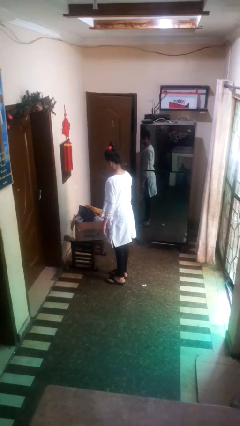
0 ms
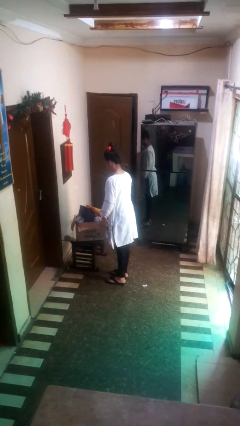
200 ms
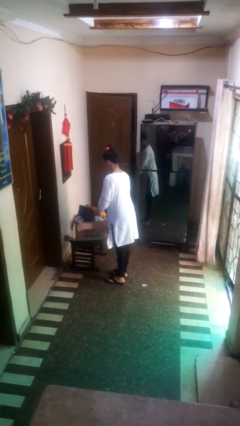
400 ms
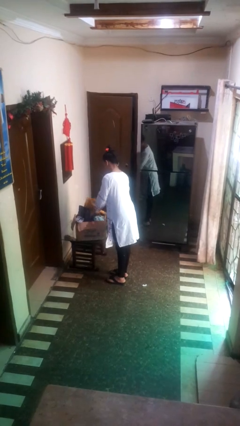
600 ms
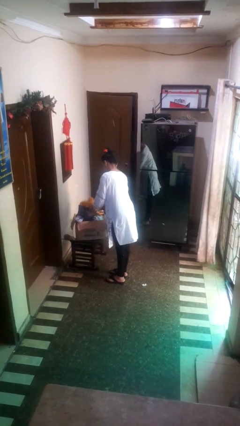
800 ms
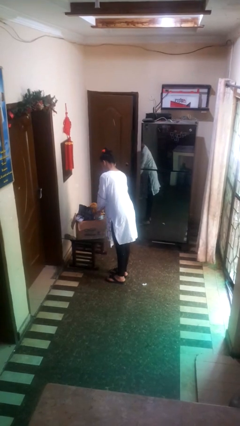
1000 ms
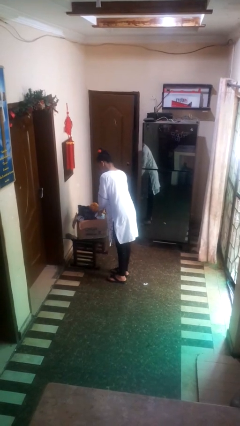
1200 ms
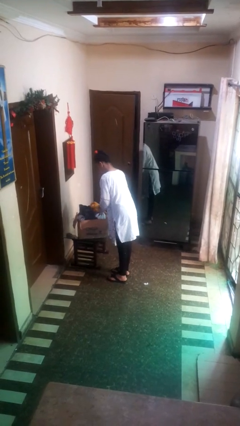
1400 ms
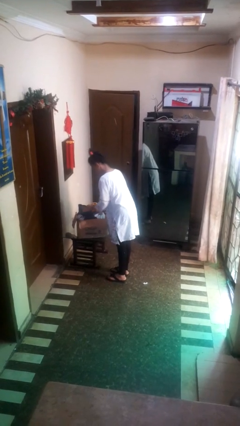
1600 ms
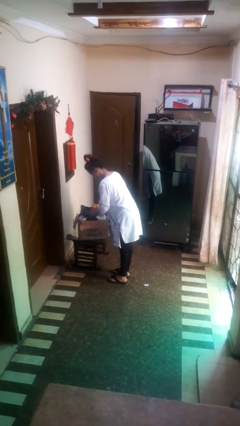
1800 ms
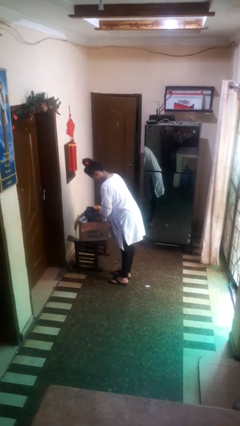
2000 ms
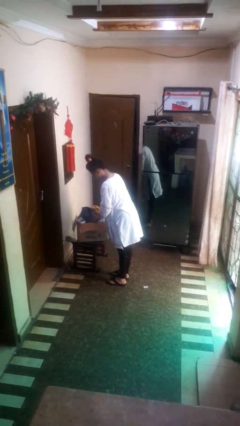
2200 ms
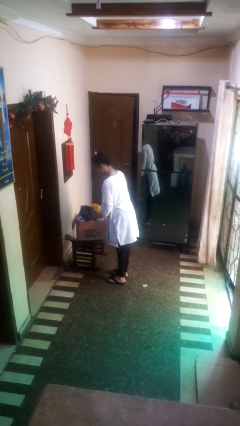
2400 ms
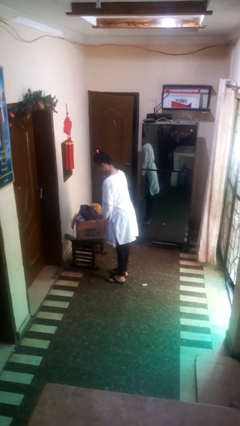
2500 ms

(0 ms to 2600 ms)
person searches in box

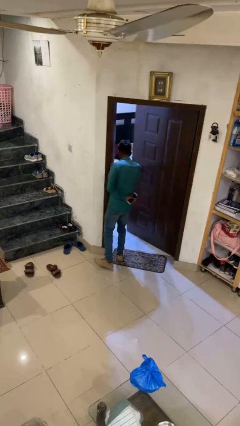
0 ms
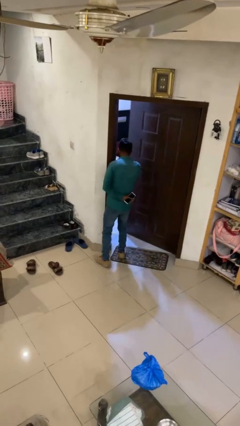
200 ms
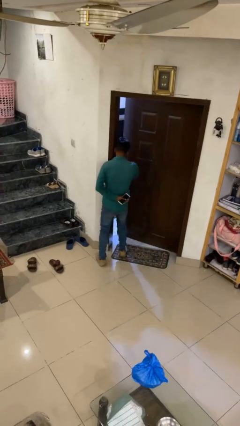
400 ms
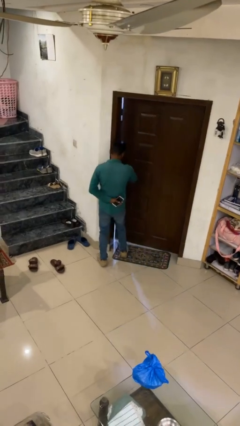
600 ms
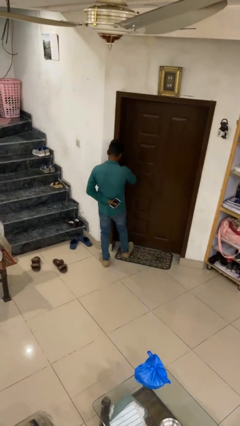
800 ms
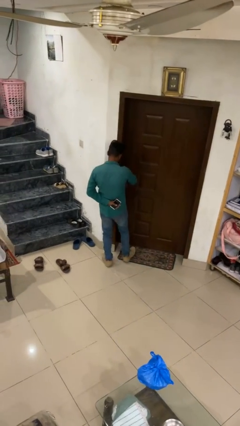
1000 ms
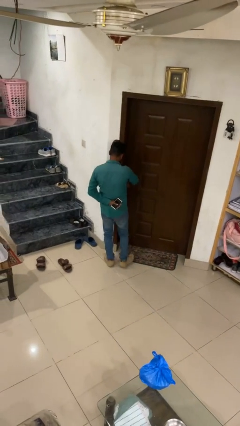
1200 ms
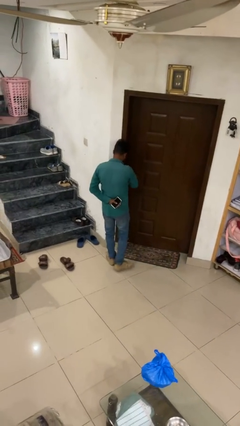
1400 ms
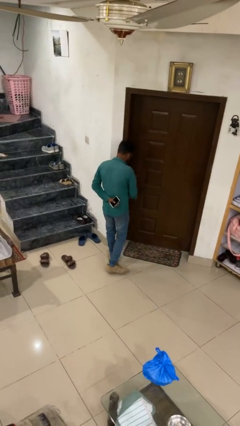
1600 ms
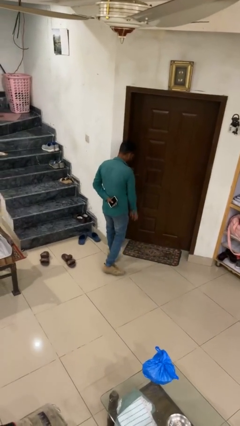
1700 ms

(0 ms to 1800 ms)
person closes facility door

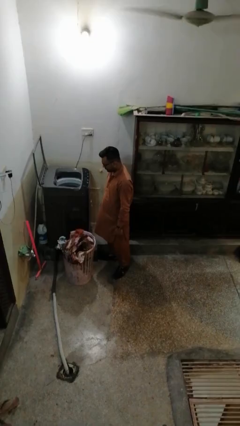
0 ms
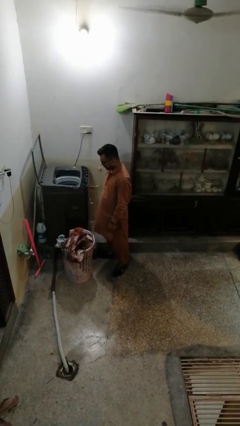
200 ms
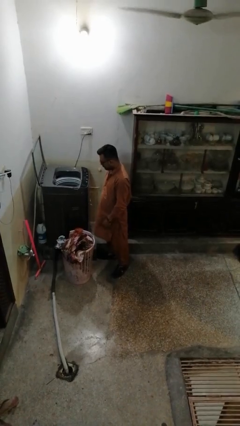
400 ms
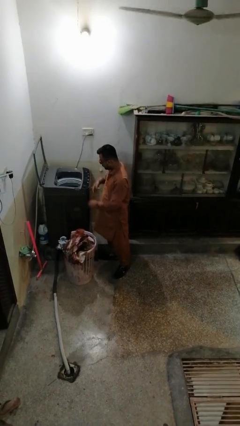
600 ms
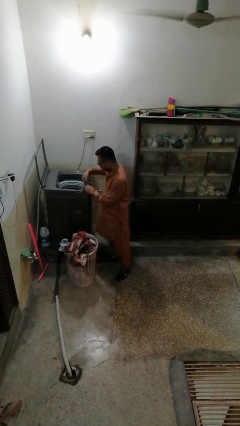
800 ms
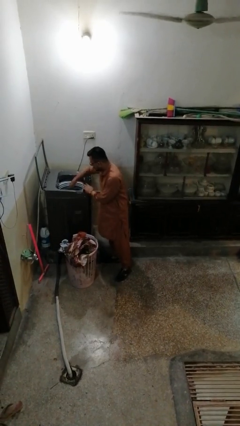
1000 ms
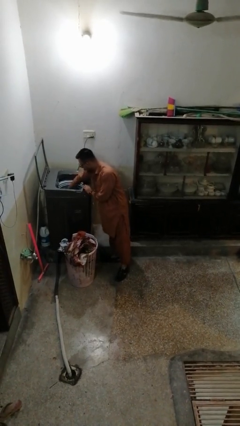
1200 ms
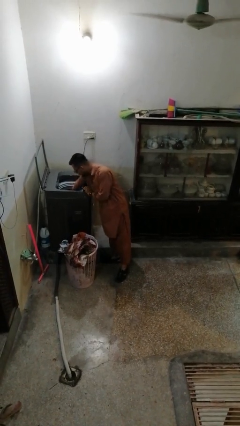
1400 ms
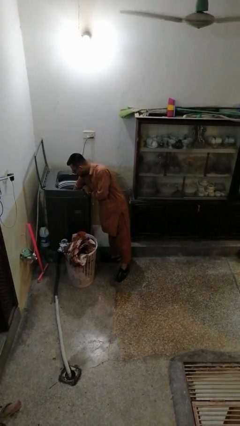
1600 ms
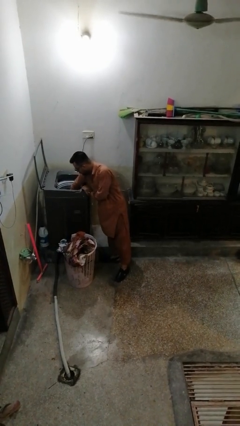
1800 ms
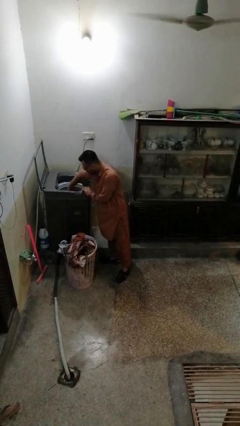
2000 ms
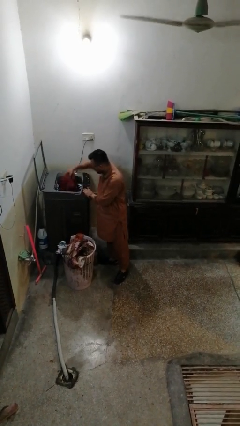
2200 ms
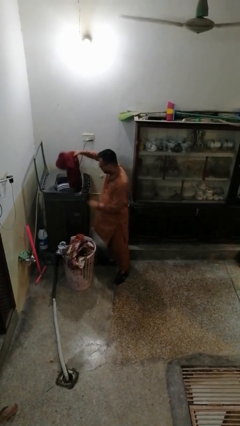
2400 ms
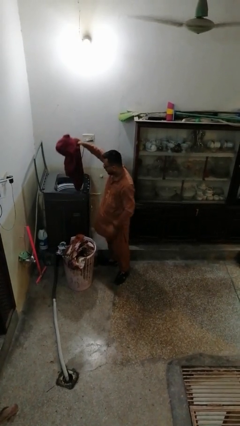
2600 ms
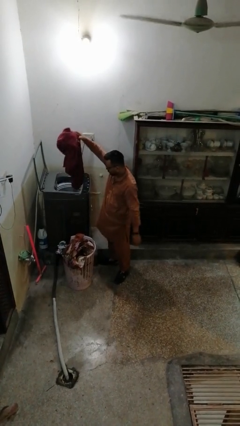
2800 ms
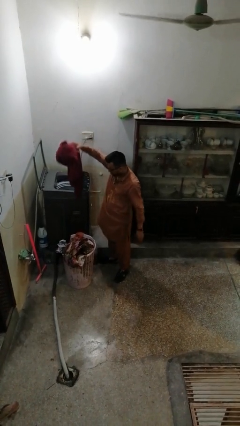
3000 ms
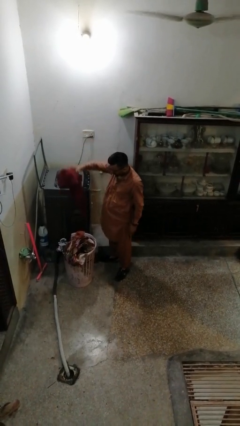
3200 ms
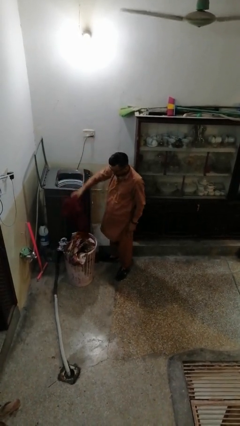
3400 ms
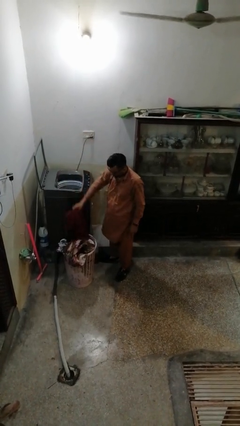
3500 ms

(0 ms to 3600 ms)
person unloads dryer

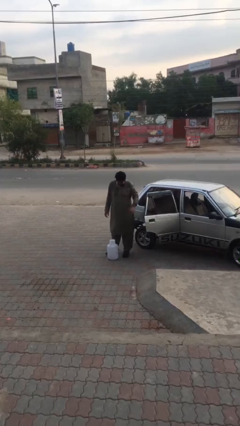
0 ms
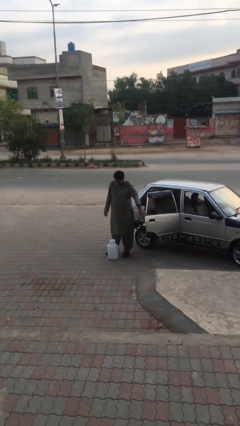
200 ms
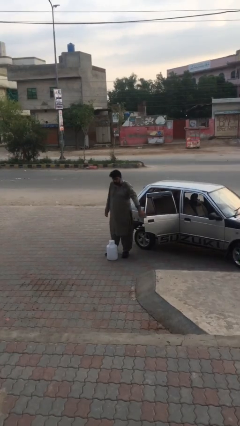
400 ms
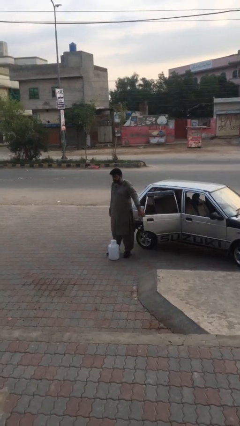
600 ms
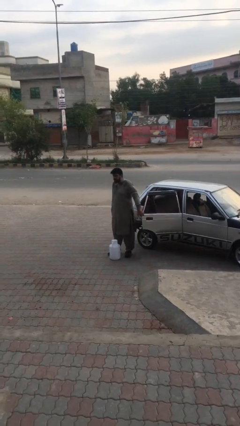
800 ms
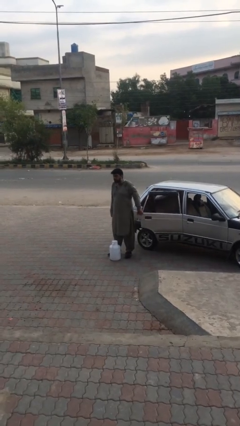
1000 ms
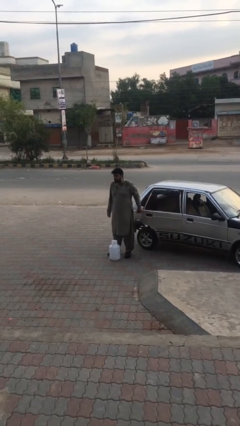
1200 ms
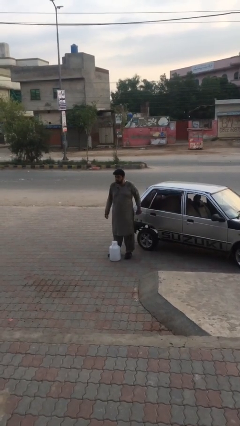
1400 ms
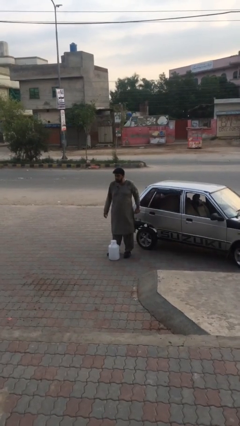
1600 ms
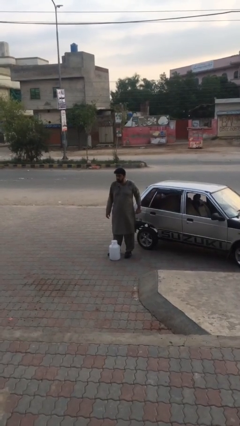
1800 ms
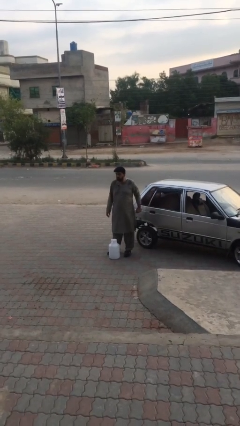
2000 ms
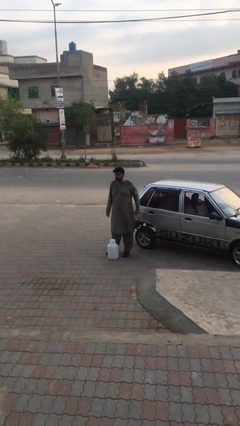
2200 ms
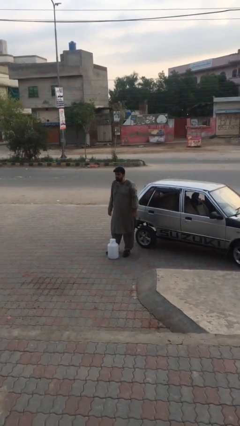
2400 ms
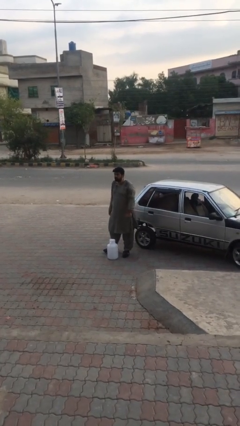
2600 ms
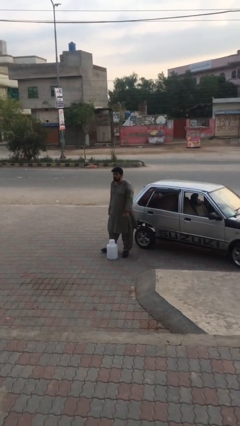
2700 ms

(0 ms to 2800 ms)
person closes car door

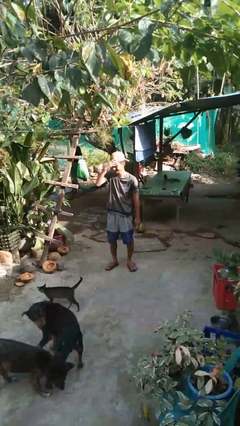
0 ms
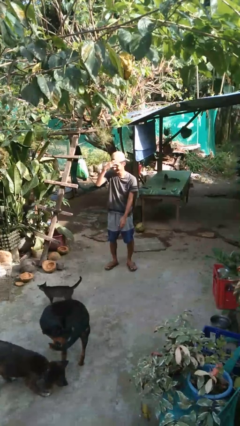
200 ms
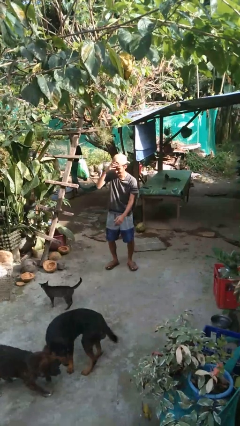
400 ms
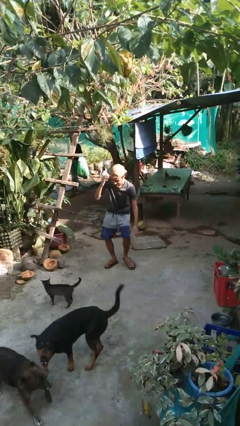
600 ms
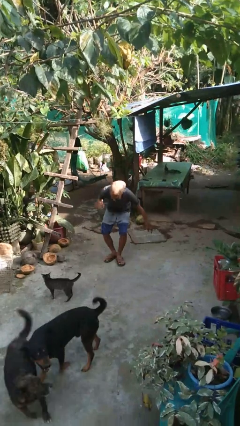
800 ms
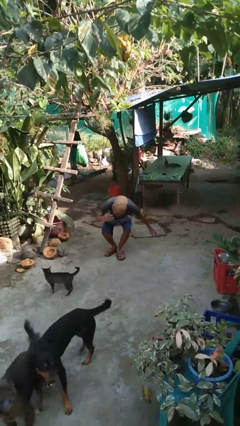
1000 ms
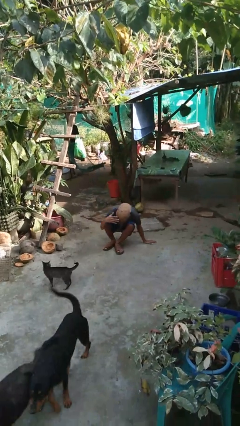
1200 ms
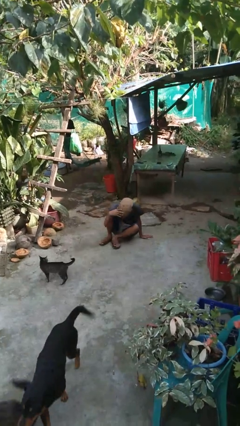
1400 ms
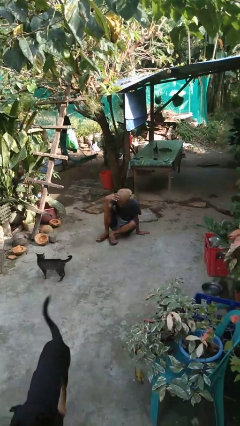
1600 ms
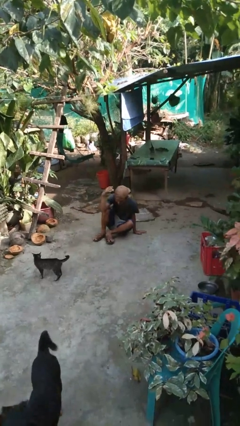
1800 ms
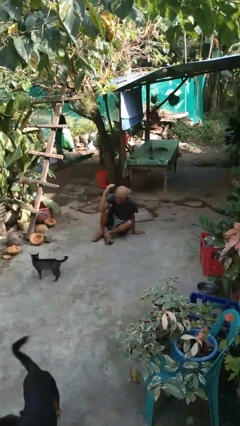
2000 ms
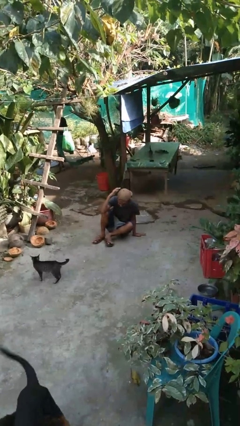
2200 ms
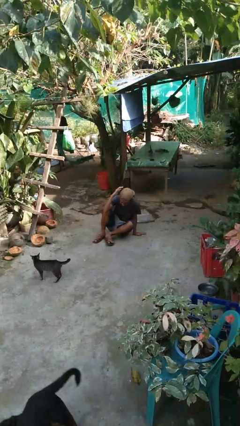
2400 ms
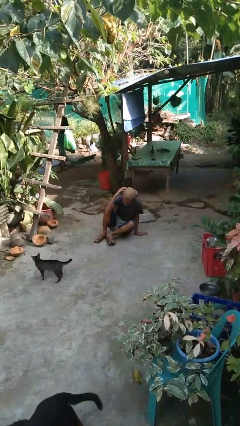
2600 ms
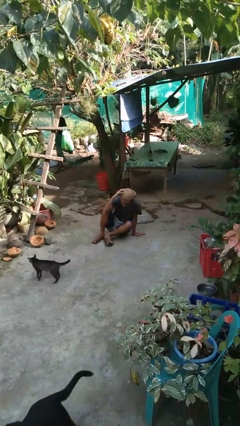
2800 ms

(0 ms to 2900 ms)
person falls while standing

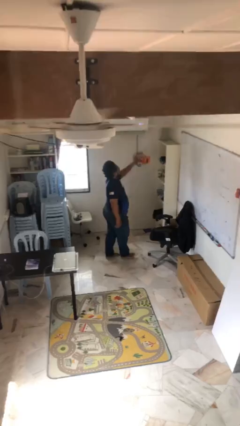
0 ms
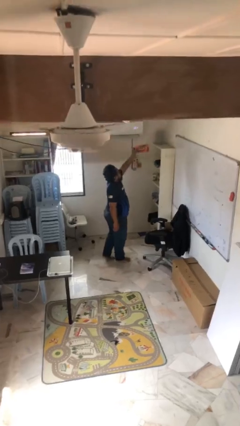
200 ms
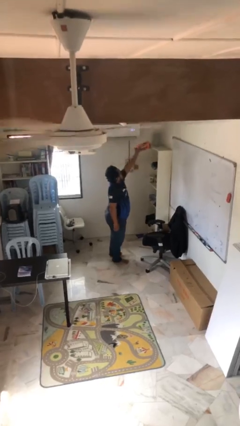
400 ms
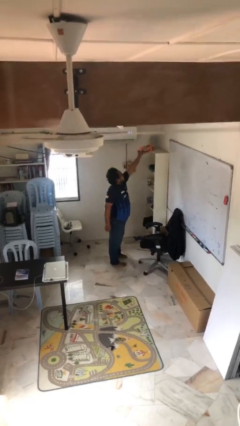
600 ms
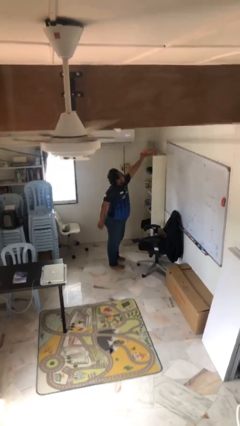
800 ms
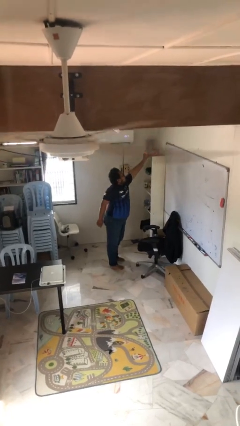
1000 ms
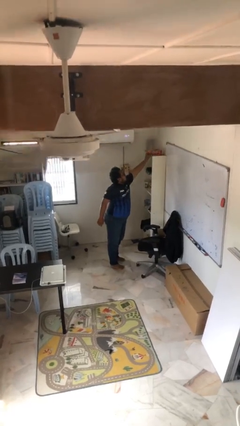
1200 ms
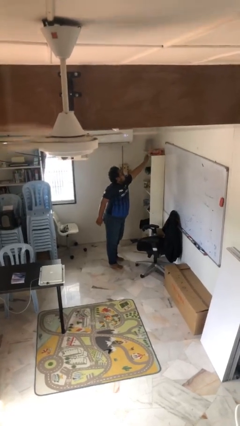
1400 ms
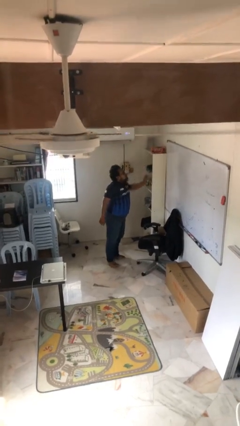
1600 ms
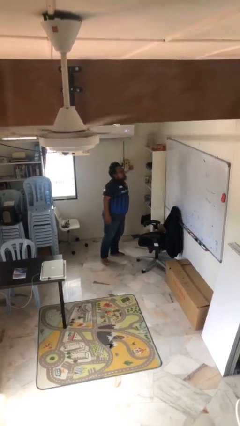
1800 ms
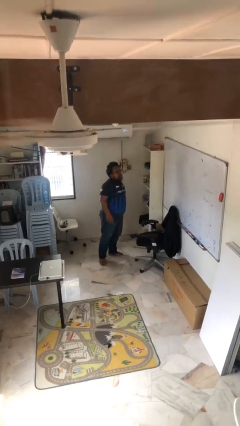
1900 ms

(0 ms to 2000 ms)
person puts down object on shelf

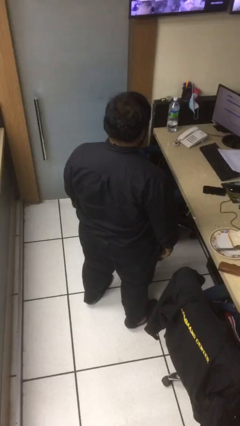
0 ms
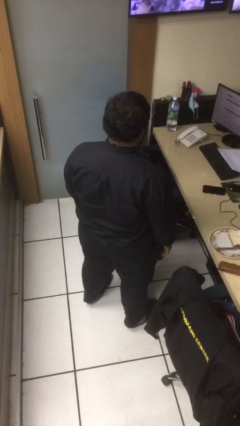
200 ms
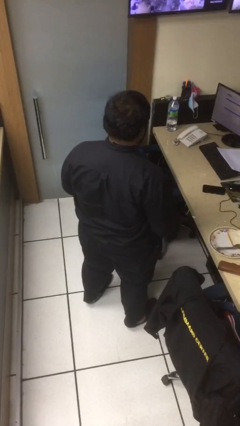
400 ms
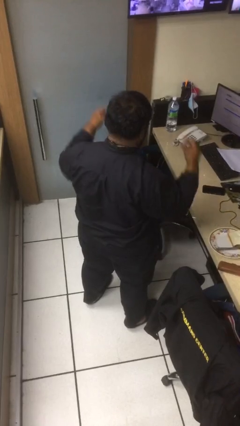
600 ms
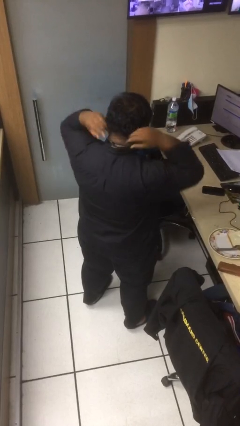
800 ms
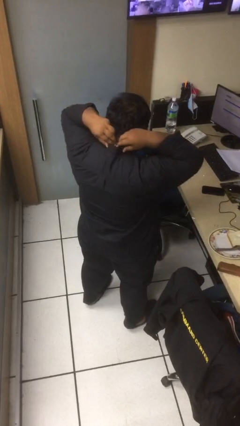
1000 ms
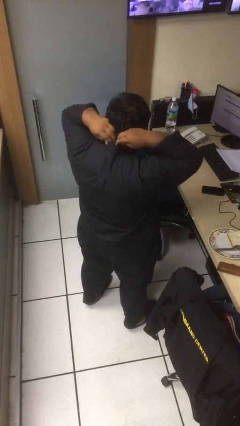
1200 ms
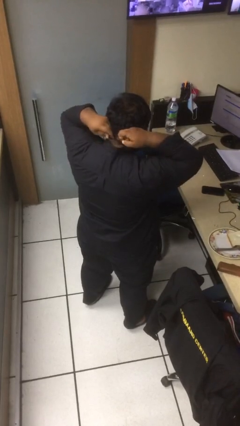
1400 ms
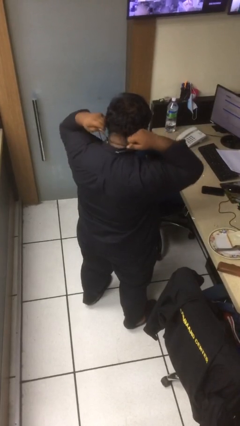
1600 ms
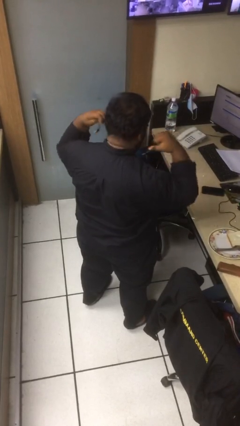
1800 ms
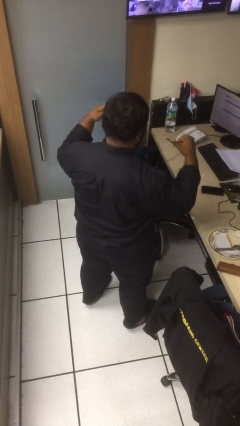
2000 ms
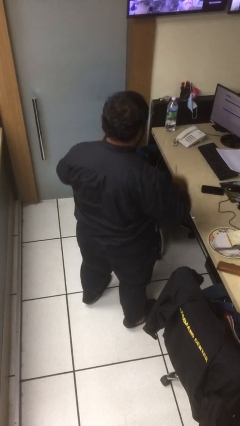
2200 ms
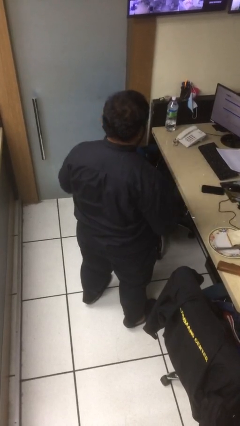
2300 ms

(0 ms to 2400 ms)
person takes off necklace
